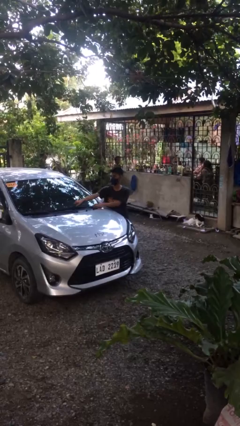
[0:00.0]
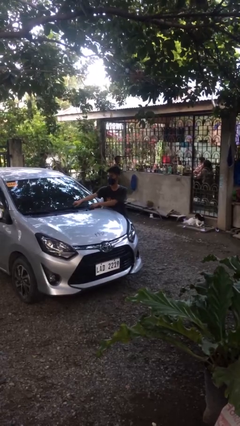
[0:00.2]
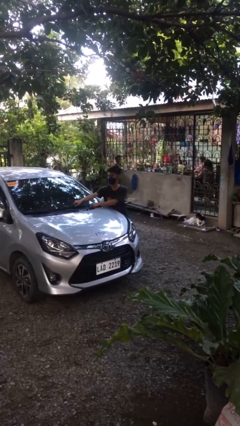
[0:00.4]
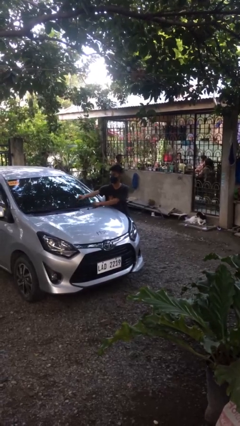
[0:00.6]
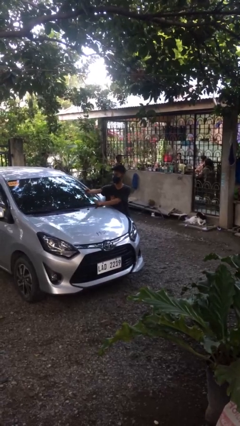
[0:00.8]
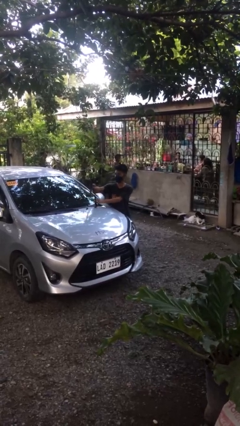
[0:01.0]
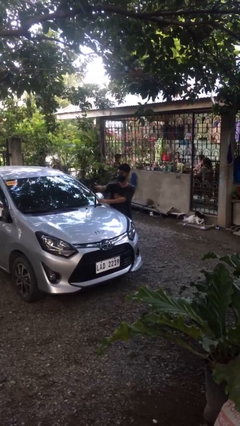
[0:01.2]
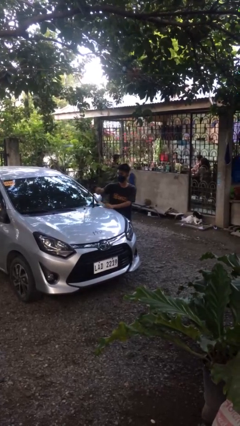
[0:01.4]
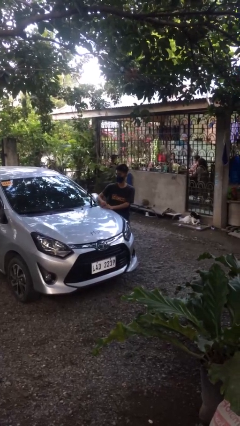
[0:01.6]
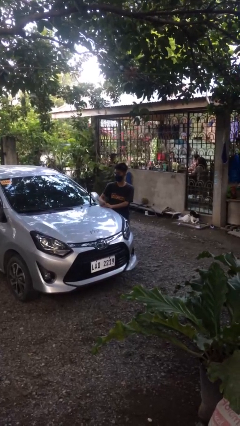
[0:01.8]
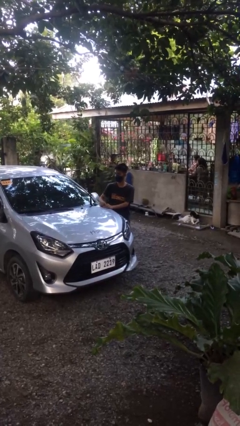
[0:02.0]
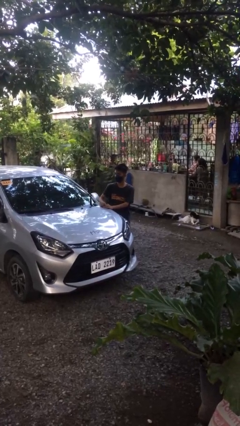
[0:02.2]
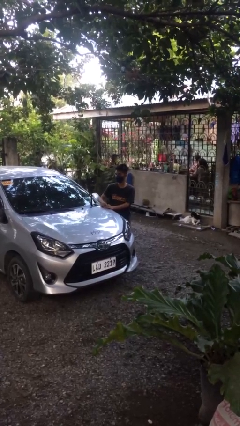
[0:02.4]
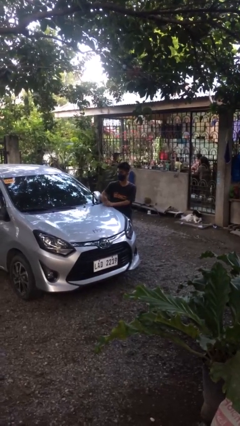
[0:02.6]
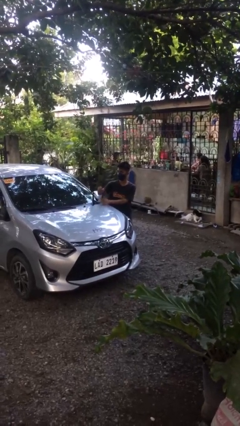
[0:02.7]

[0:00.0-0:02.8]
person flips up car wipers

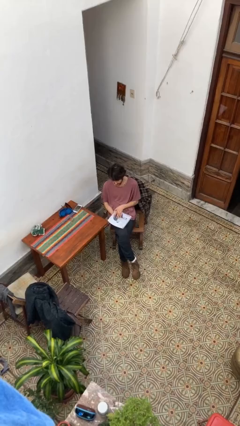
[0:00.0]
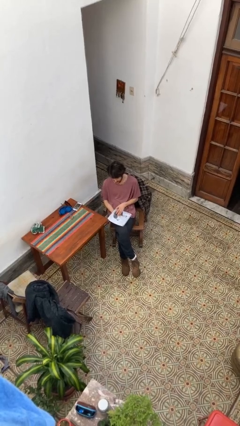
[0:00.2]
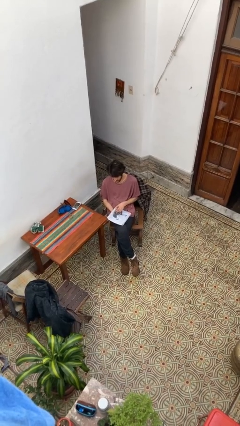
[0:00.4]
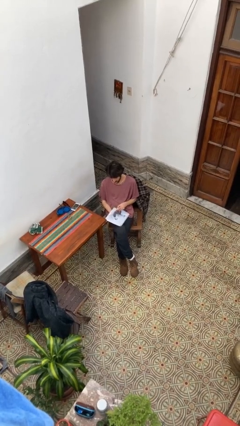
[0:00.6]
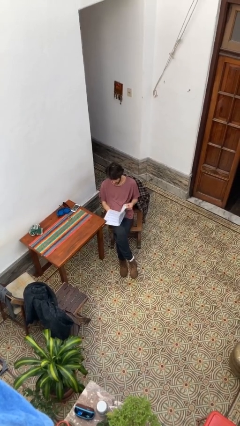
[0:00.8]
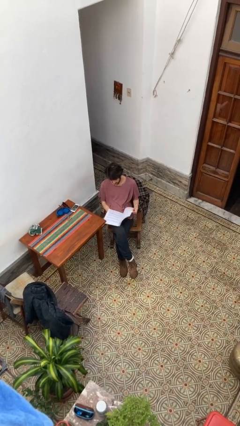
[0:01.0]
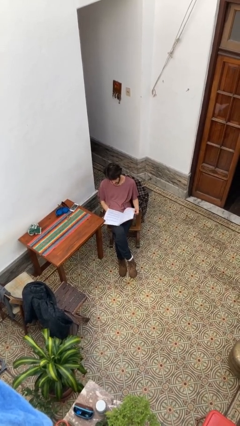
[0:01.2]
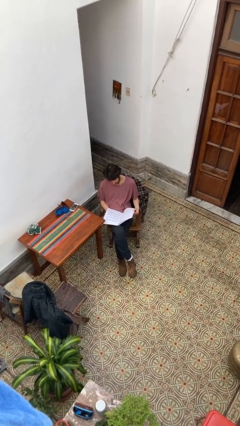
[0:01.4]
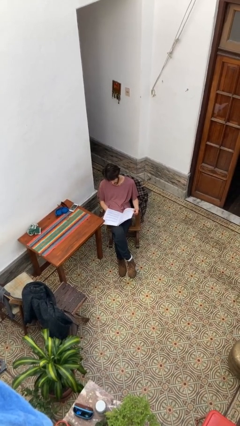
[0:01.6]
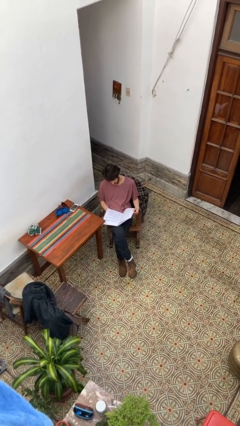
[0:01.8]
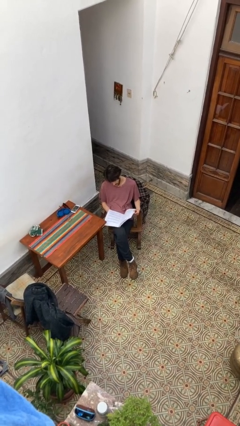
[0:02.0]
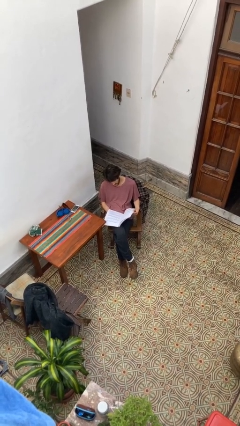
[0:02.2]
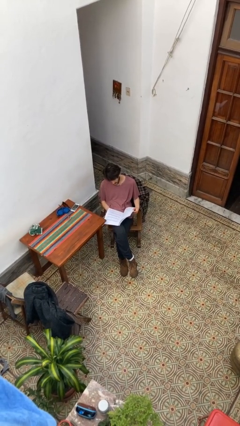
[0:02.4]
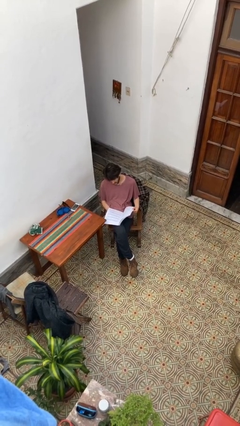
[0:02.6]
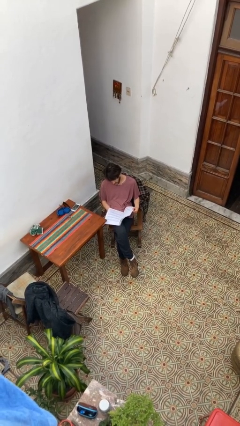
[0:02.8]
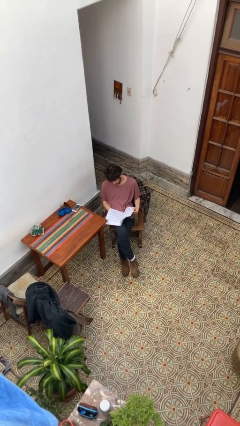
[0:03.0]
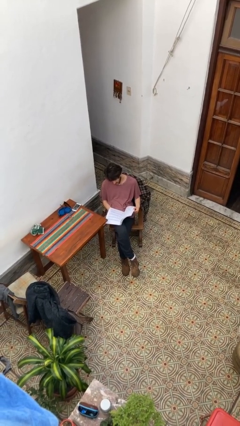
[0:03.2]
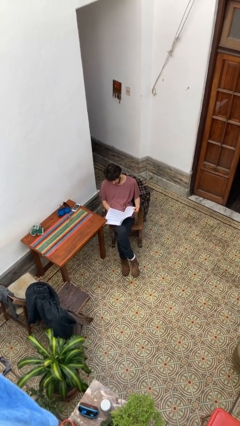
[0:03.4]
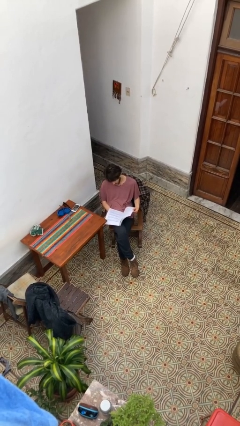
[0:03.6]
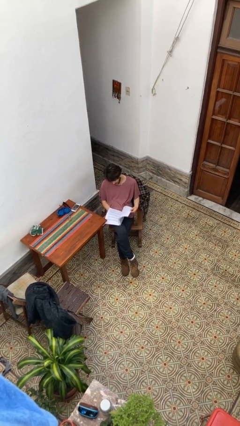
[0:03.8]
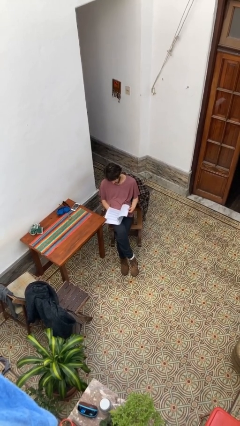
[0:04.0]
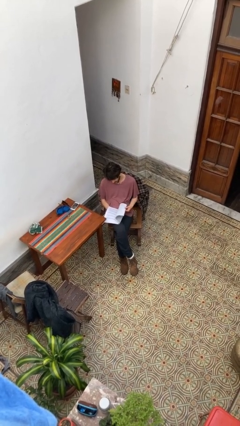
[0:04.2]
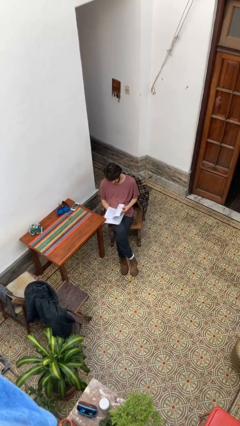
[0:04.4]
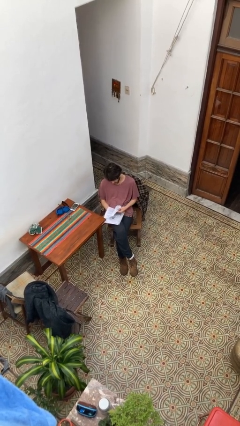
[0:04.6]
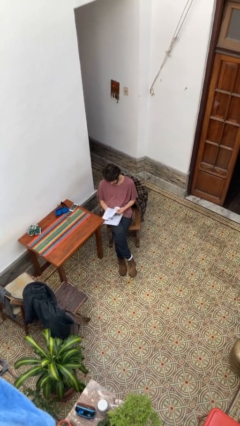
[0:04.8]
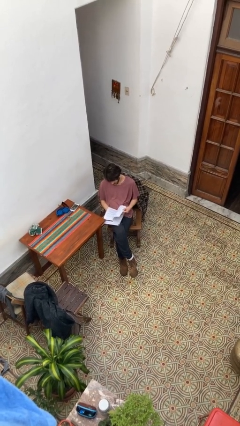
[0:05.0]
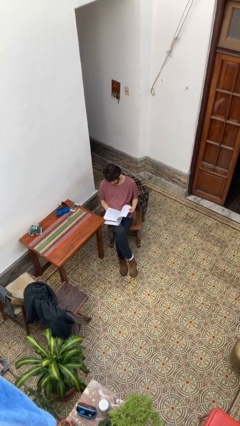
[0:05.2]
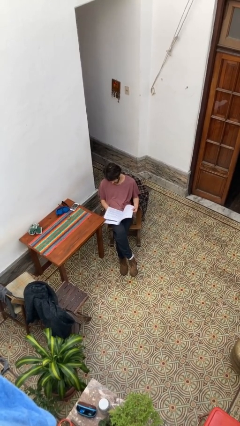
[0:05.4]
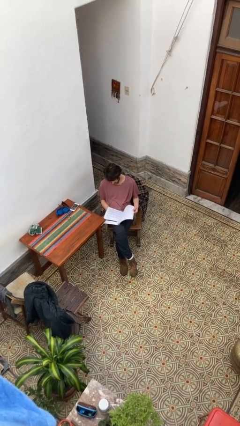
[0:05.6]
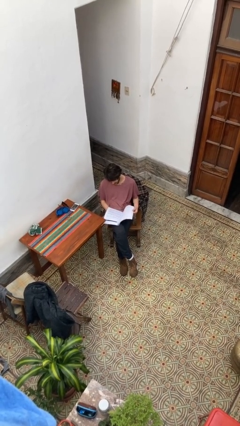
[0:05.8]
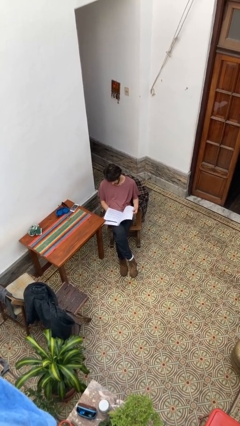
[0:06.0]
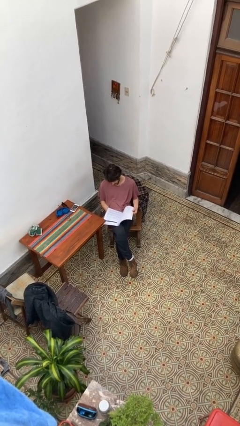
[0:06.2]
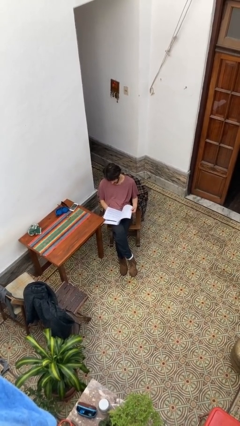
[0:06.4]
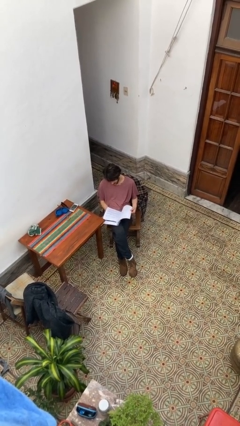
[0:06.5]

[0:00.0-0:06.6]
person reads document

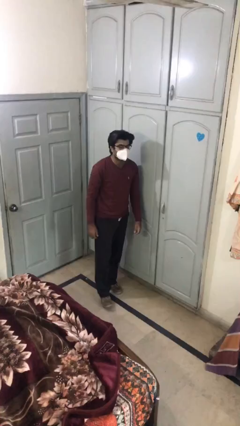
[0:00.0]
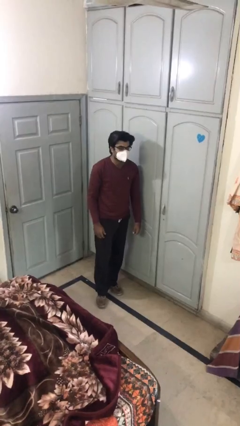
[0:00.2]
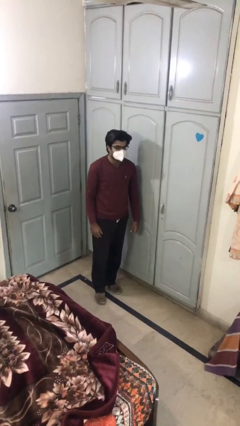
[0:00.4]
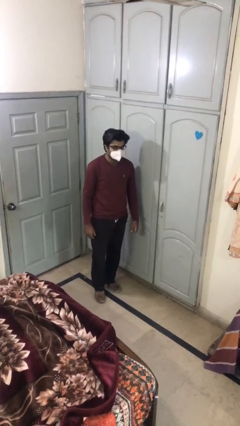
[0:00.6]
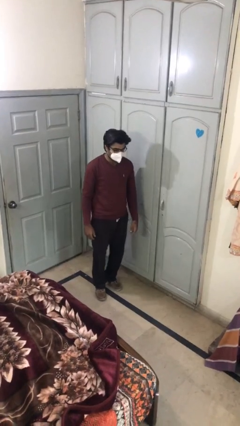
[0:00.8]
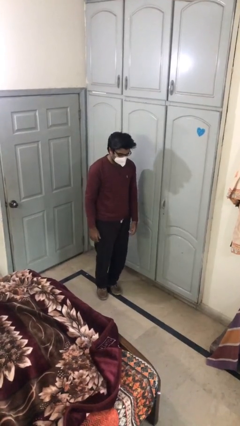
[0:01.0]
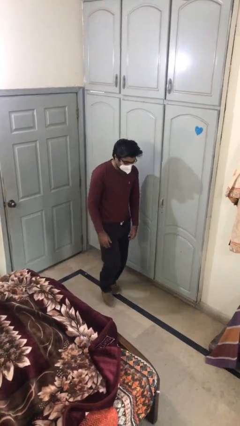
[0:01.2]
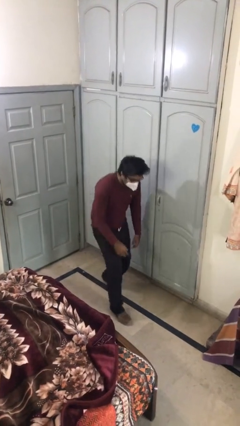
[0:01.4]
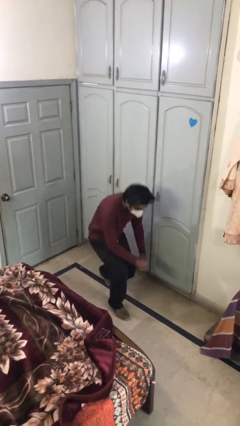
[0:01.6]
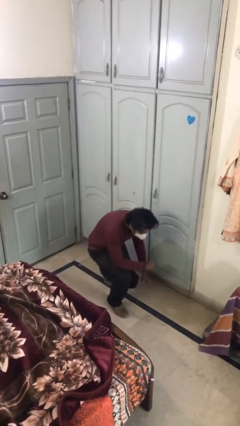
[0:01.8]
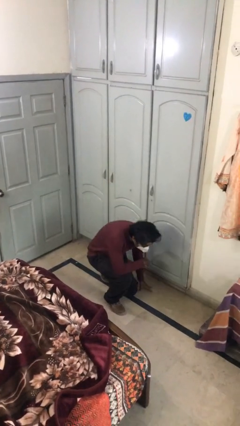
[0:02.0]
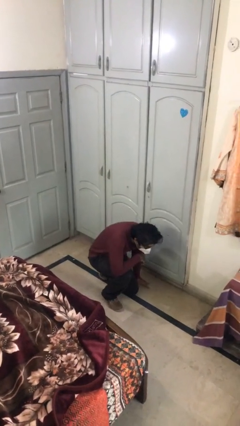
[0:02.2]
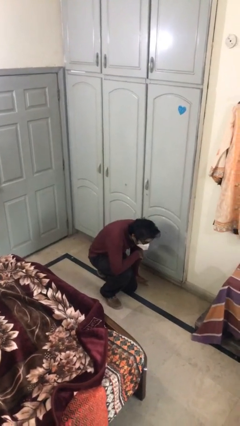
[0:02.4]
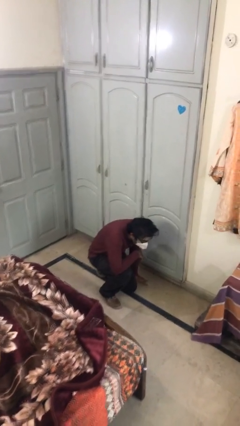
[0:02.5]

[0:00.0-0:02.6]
person sits down

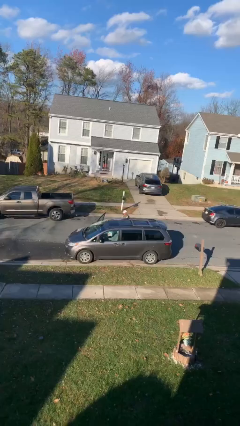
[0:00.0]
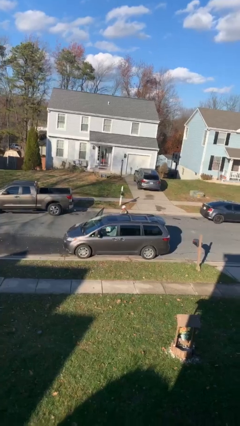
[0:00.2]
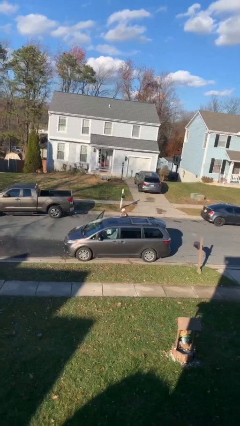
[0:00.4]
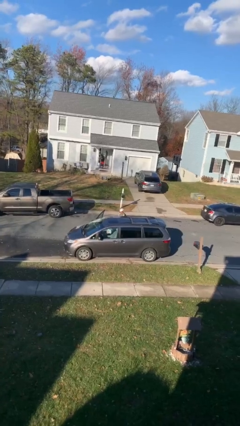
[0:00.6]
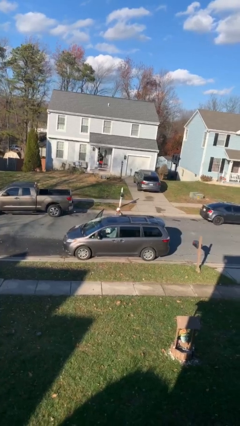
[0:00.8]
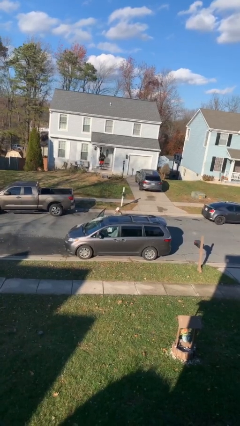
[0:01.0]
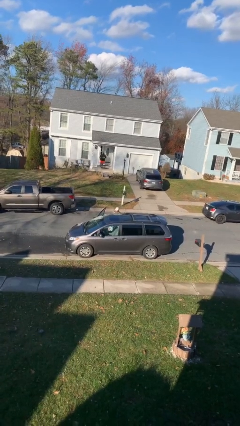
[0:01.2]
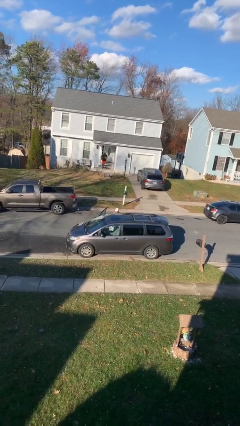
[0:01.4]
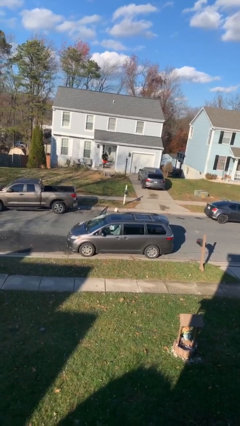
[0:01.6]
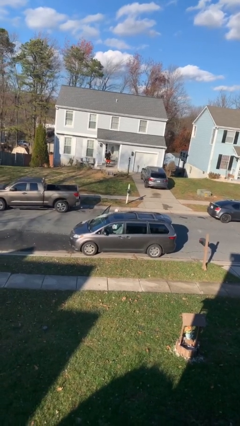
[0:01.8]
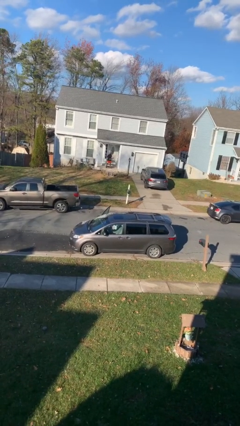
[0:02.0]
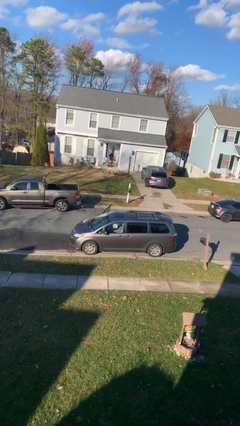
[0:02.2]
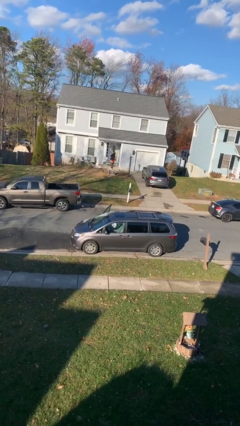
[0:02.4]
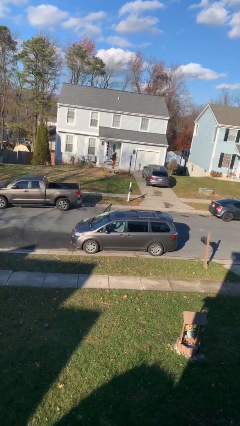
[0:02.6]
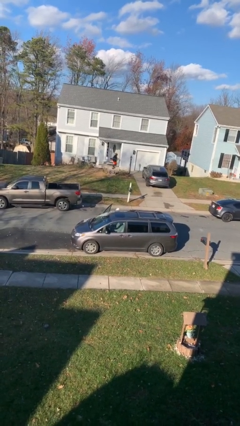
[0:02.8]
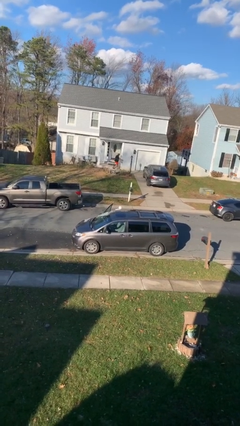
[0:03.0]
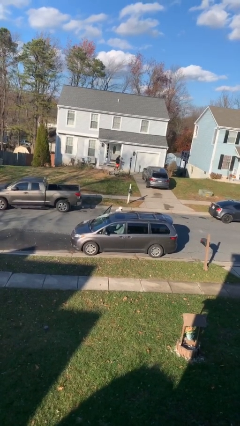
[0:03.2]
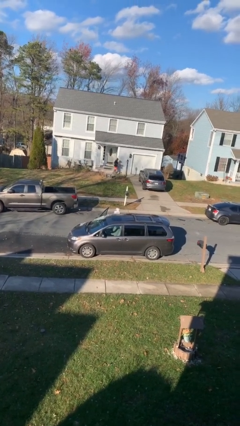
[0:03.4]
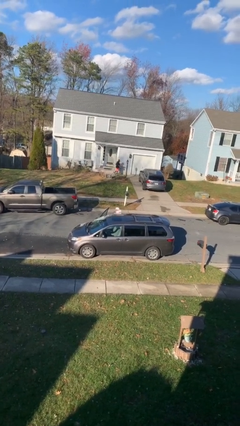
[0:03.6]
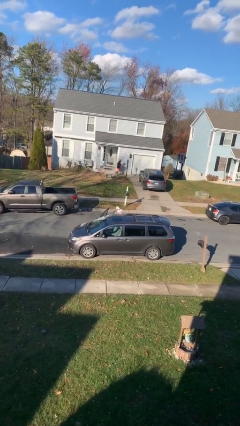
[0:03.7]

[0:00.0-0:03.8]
person unloads car

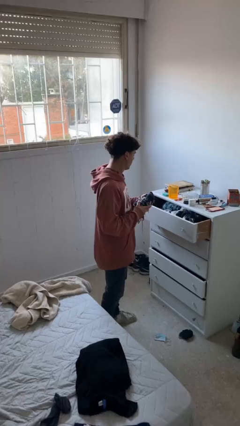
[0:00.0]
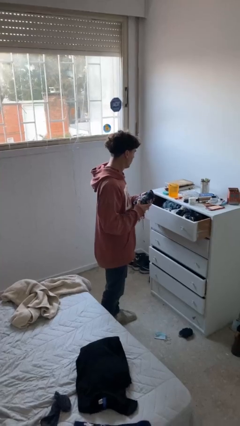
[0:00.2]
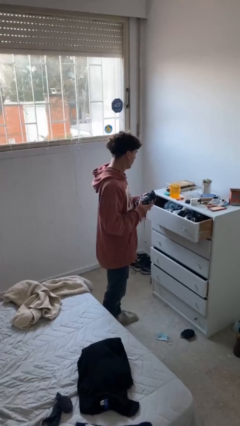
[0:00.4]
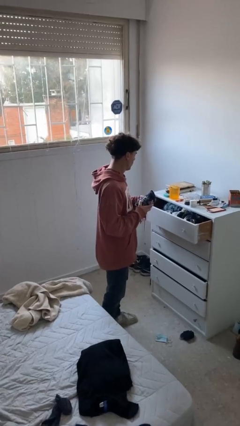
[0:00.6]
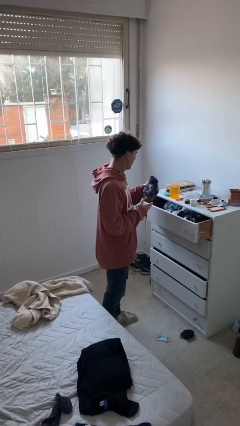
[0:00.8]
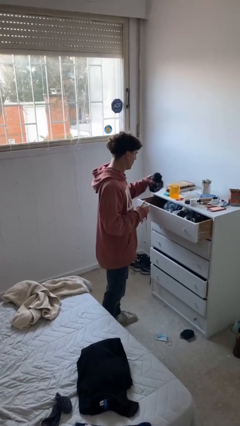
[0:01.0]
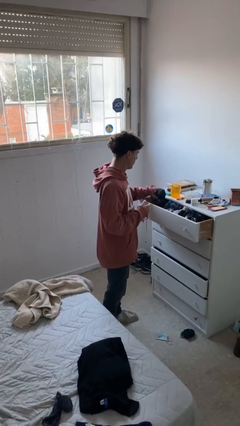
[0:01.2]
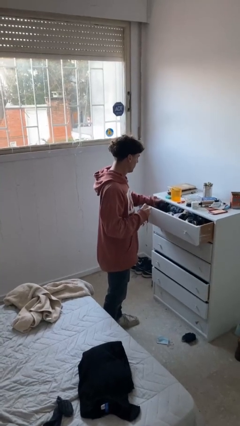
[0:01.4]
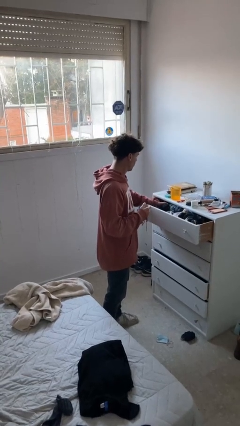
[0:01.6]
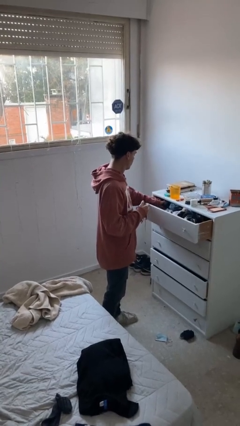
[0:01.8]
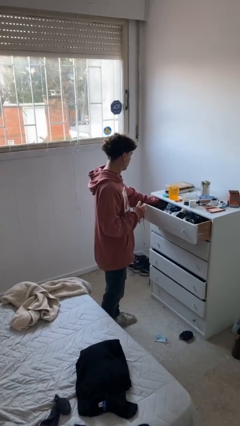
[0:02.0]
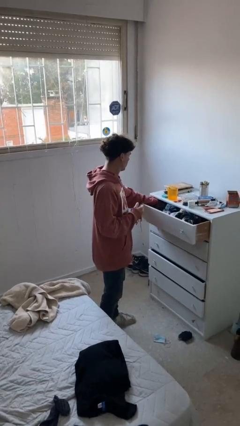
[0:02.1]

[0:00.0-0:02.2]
person puts clothes into dresser
